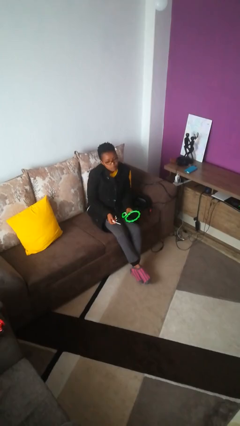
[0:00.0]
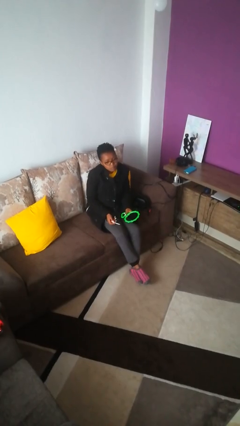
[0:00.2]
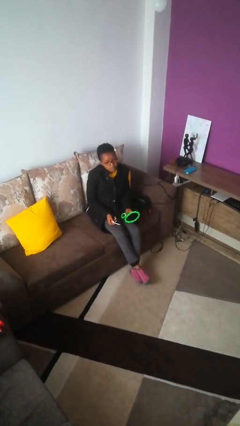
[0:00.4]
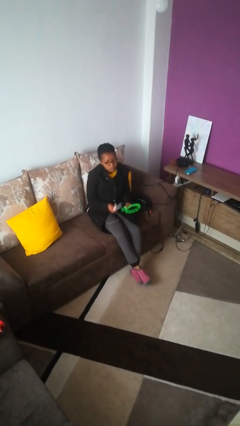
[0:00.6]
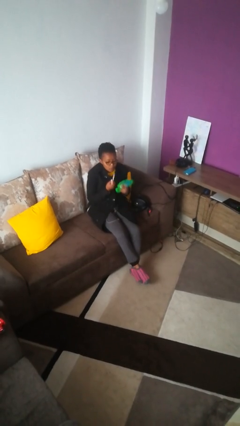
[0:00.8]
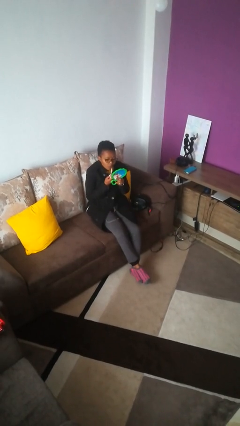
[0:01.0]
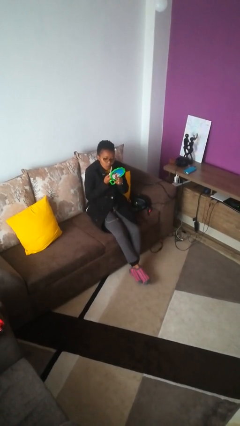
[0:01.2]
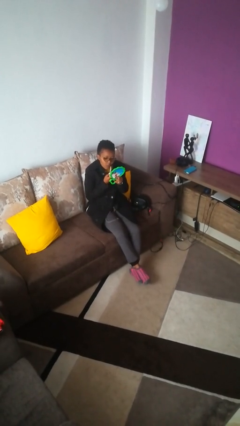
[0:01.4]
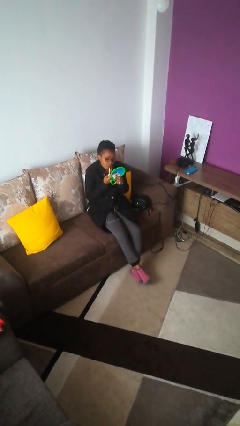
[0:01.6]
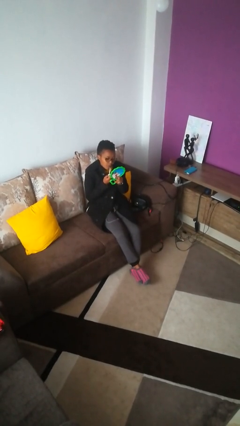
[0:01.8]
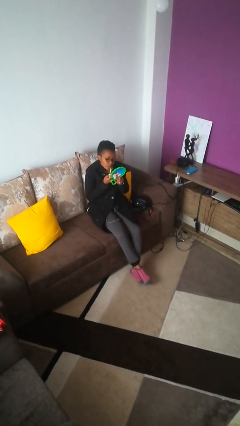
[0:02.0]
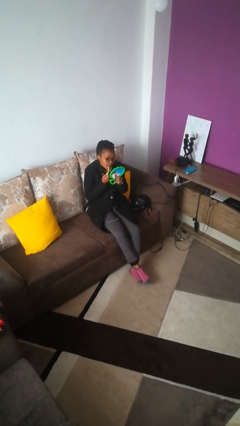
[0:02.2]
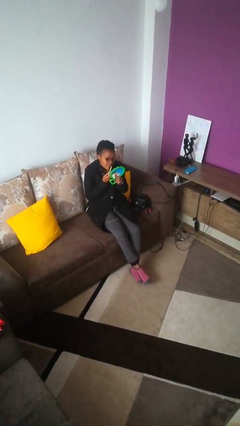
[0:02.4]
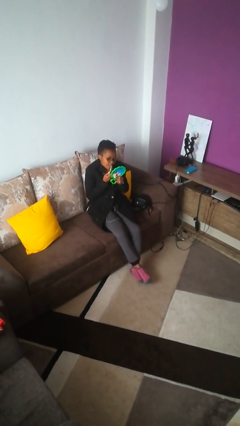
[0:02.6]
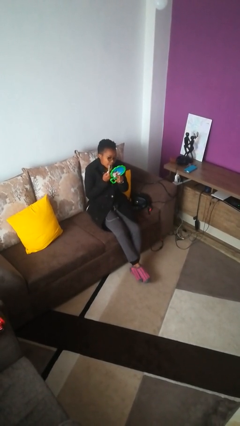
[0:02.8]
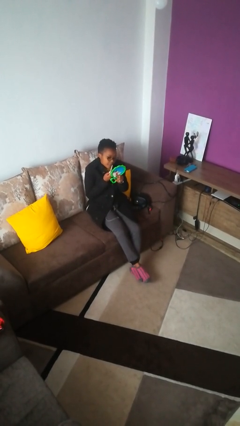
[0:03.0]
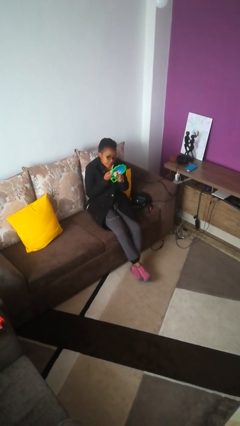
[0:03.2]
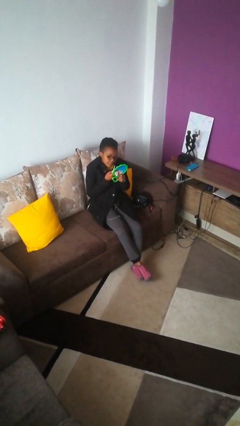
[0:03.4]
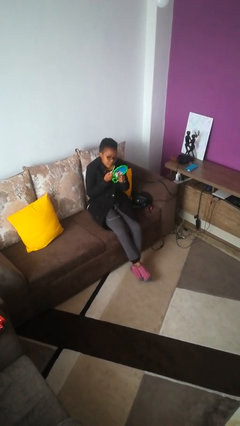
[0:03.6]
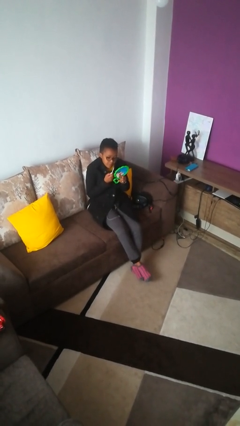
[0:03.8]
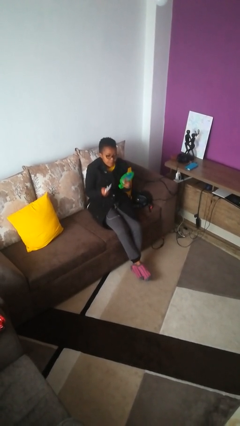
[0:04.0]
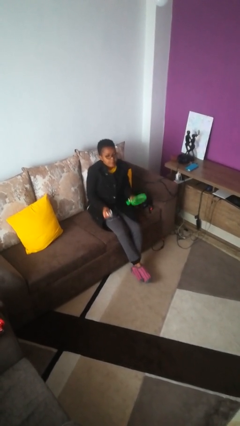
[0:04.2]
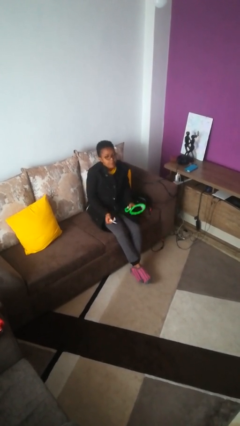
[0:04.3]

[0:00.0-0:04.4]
person applies lip makeup

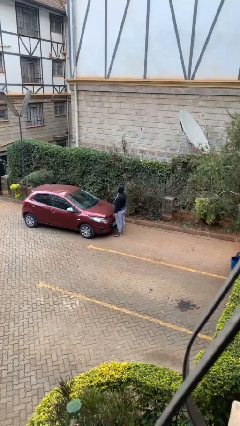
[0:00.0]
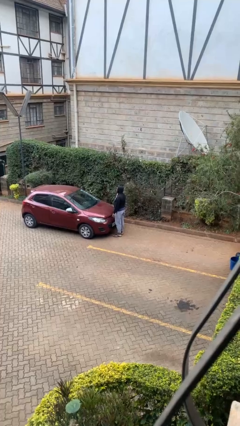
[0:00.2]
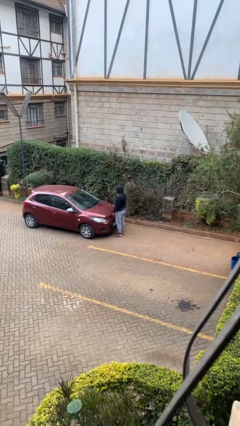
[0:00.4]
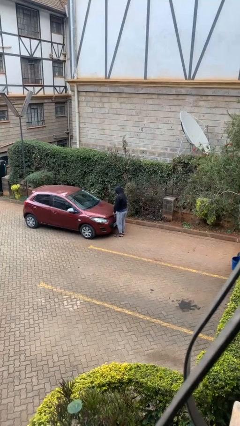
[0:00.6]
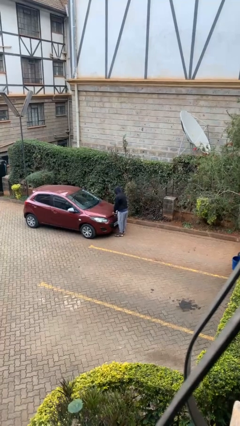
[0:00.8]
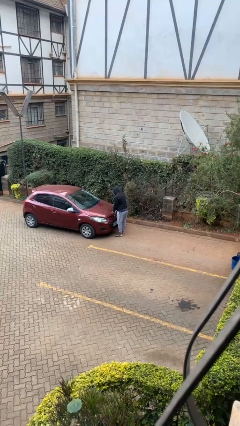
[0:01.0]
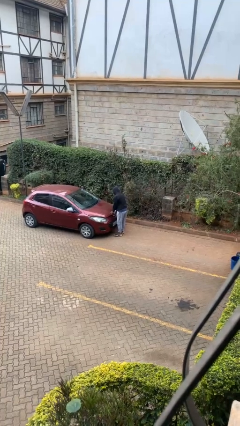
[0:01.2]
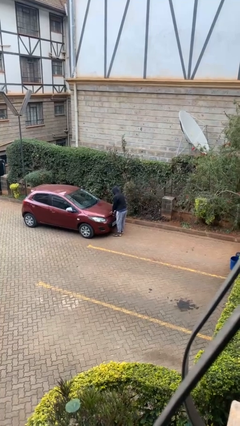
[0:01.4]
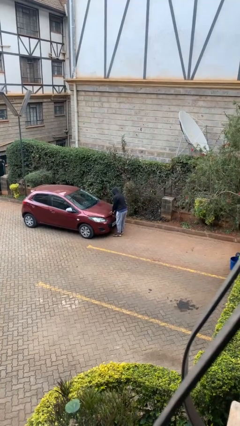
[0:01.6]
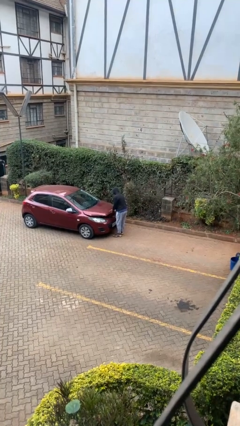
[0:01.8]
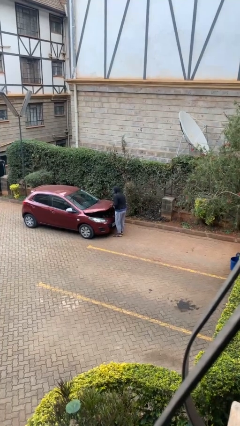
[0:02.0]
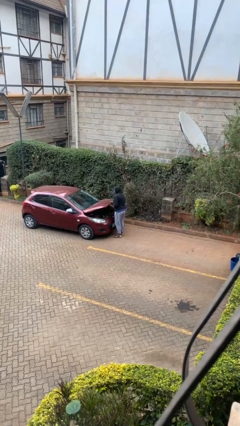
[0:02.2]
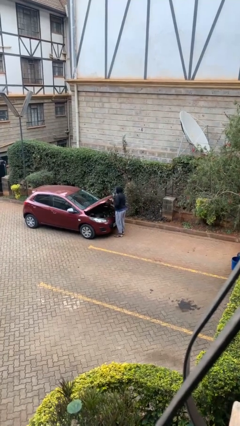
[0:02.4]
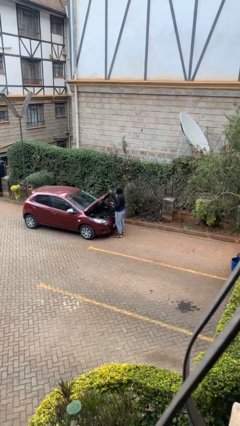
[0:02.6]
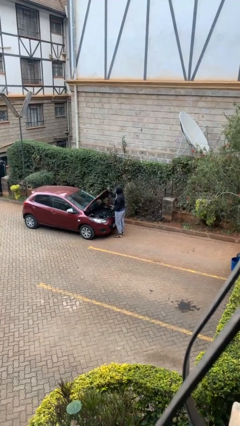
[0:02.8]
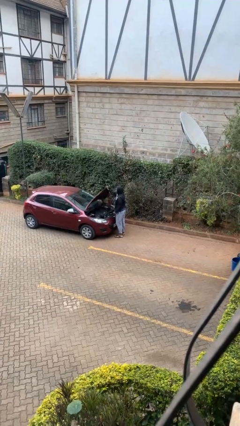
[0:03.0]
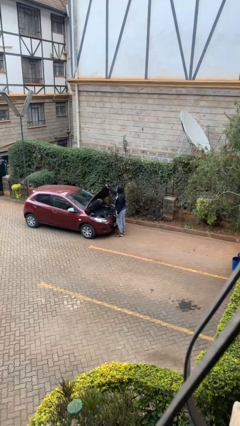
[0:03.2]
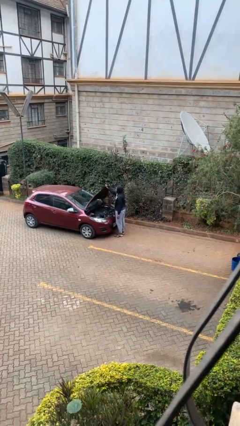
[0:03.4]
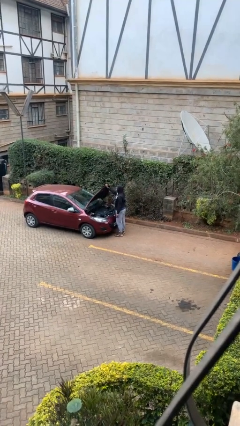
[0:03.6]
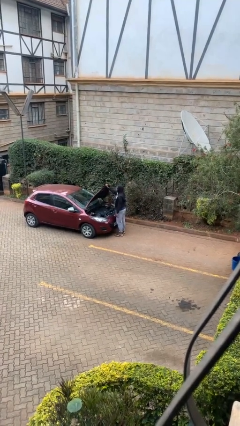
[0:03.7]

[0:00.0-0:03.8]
person opens car hood

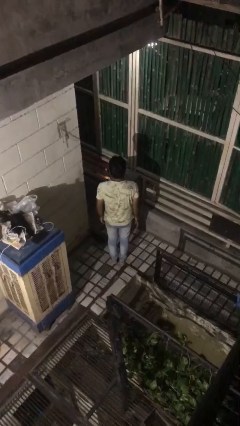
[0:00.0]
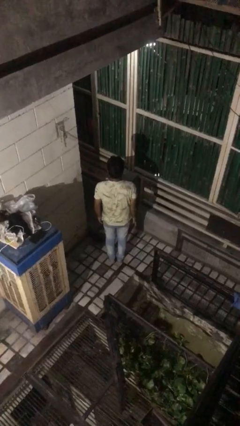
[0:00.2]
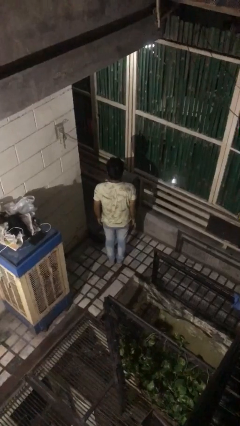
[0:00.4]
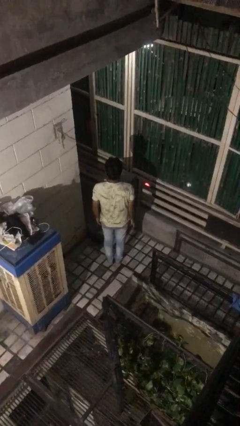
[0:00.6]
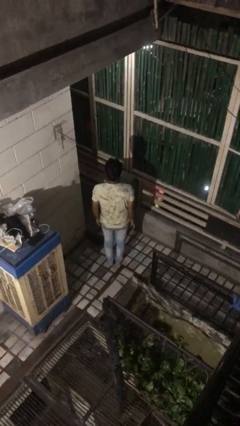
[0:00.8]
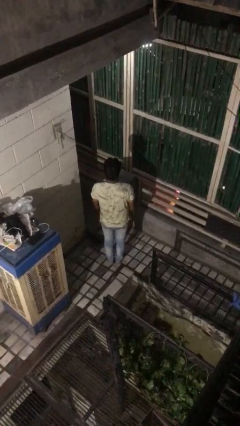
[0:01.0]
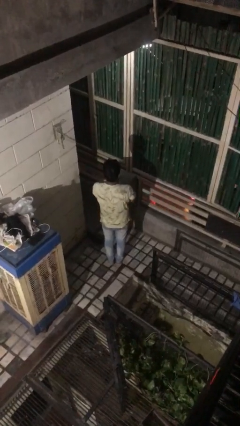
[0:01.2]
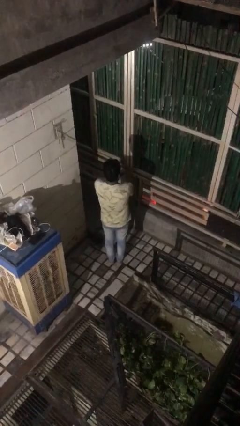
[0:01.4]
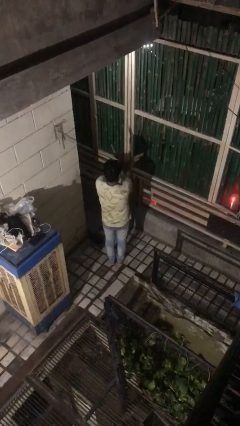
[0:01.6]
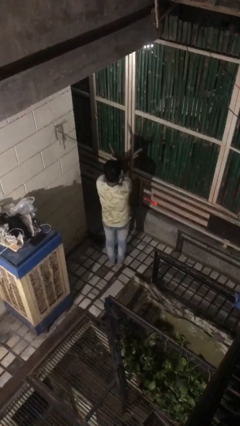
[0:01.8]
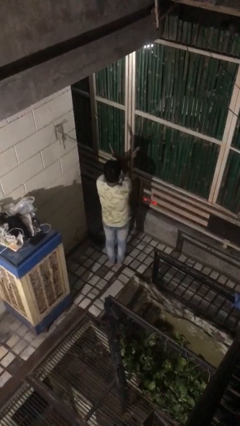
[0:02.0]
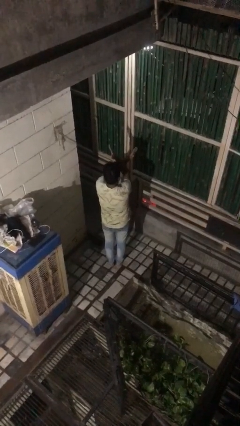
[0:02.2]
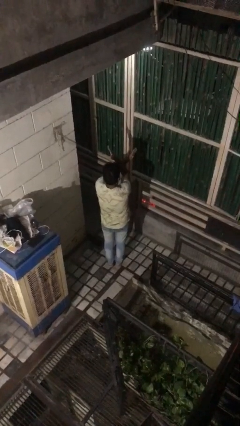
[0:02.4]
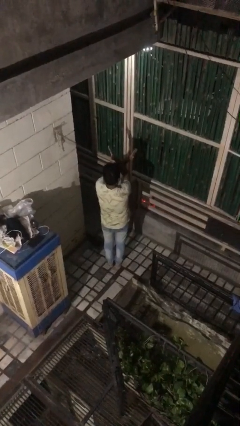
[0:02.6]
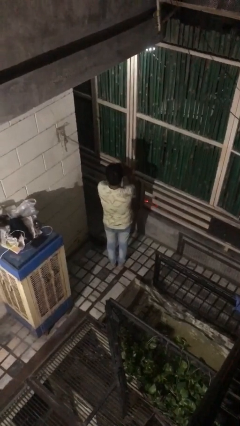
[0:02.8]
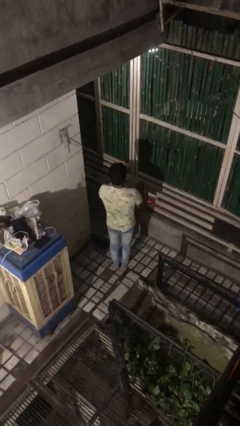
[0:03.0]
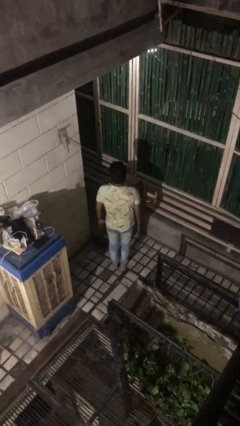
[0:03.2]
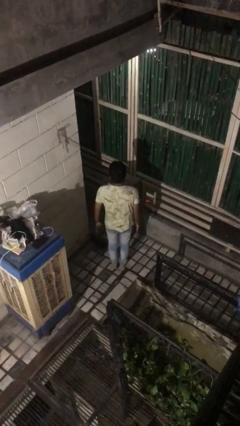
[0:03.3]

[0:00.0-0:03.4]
person gestures arms x

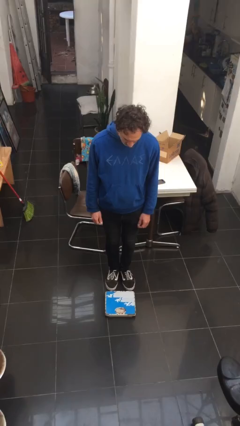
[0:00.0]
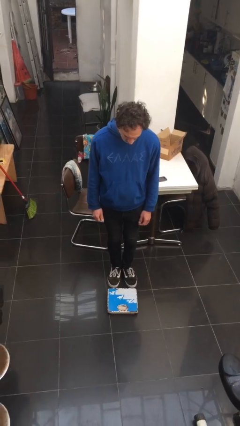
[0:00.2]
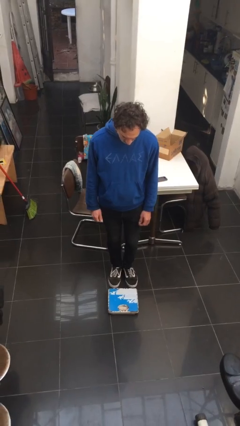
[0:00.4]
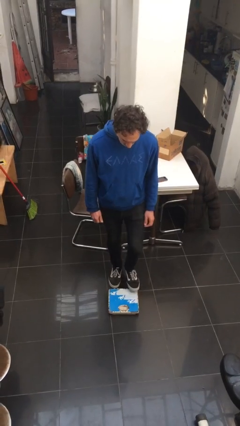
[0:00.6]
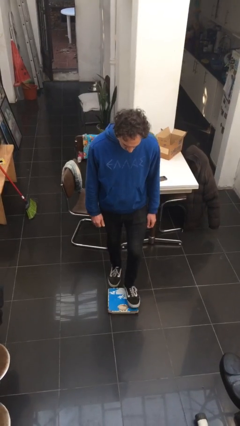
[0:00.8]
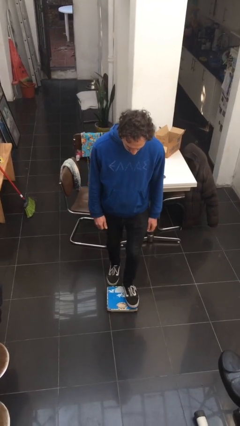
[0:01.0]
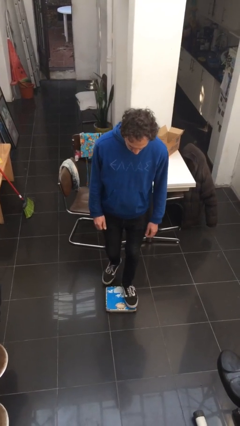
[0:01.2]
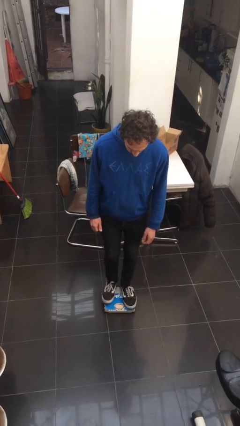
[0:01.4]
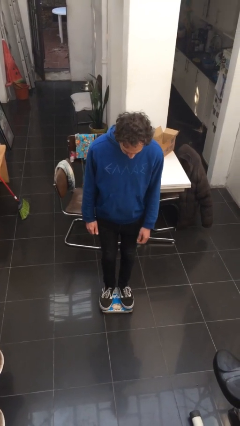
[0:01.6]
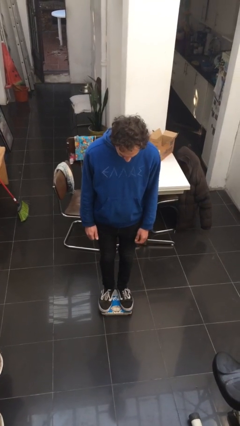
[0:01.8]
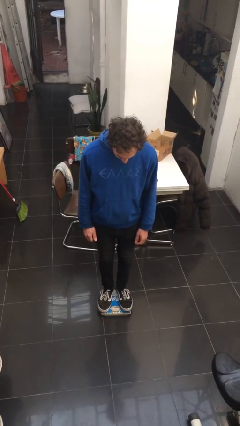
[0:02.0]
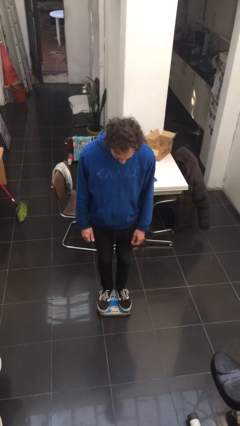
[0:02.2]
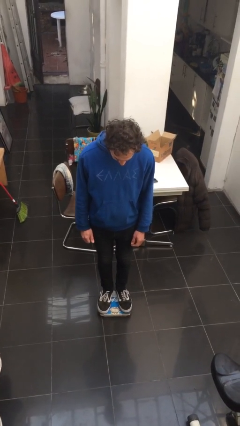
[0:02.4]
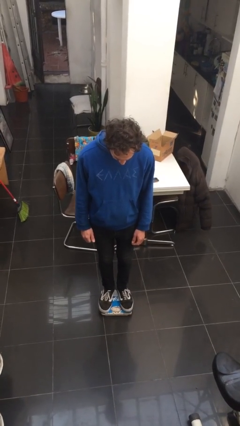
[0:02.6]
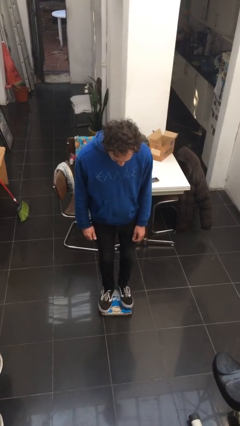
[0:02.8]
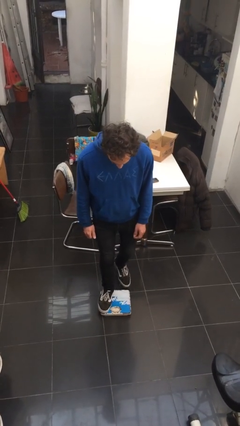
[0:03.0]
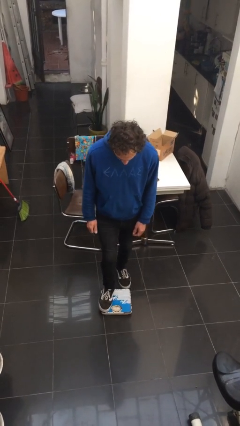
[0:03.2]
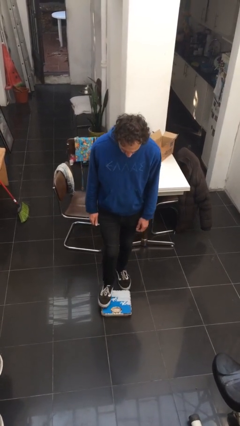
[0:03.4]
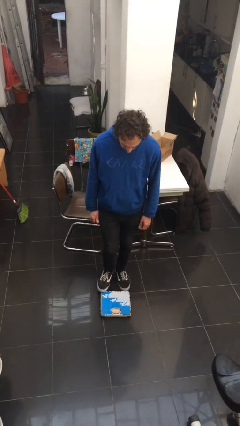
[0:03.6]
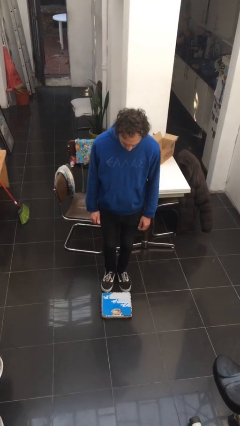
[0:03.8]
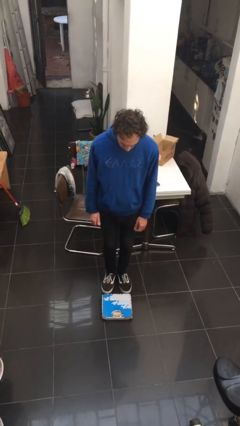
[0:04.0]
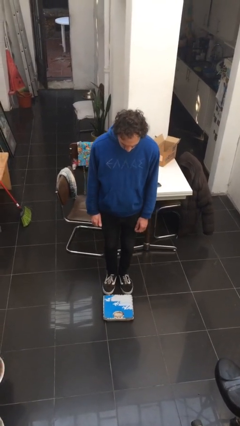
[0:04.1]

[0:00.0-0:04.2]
person uses bodyweight scale

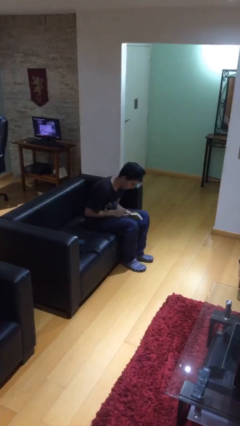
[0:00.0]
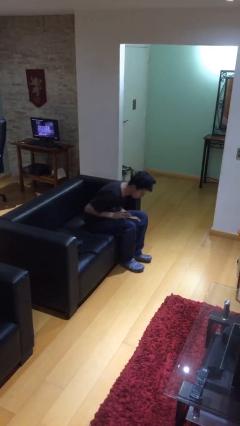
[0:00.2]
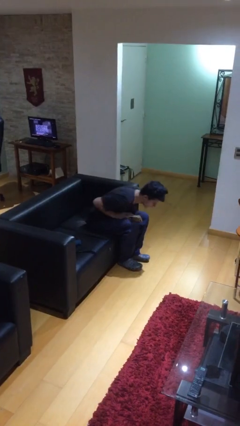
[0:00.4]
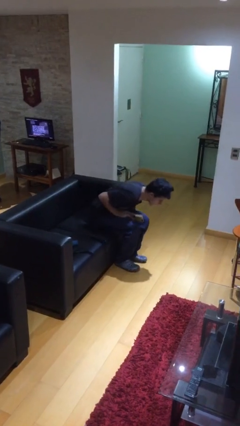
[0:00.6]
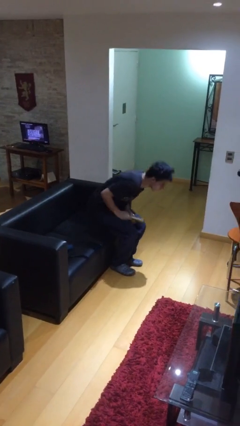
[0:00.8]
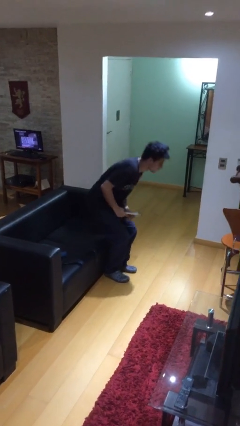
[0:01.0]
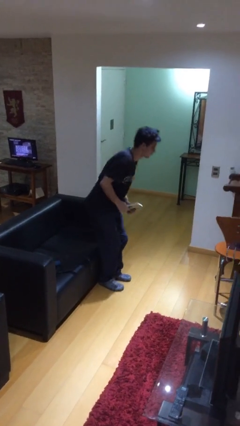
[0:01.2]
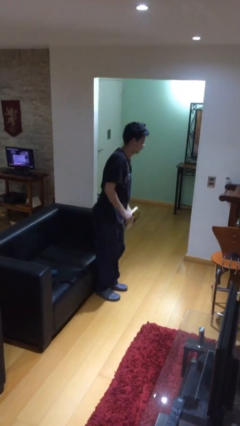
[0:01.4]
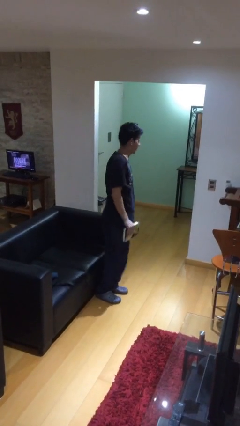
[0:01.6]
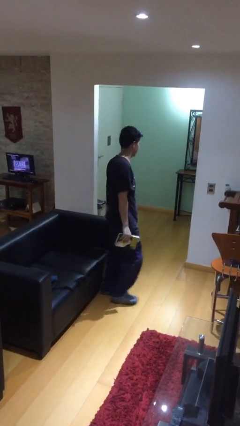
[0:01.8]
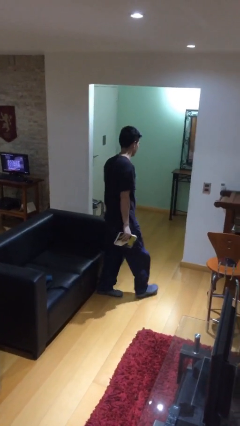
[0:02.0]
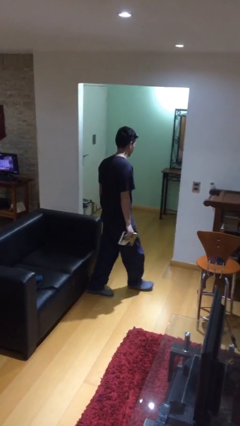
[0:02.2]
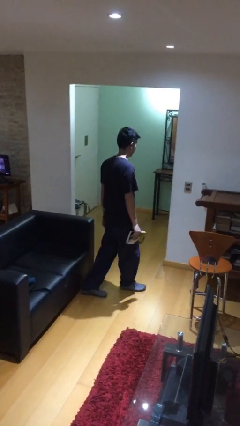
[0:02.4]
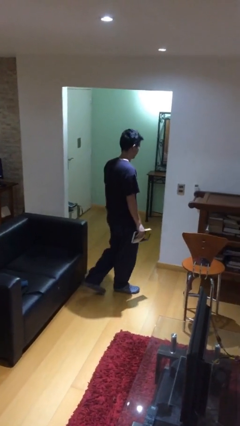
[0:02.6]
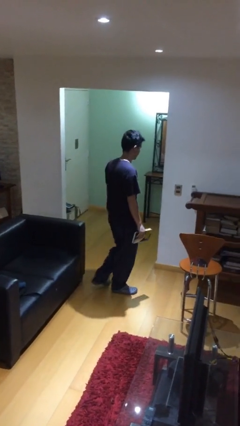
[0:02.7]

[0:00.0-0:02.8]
person stands up
